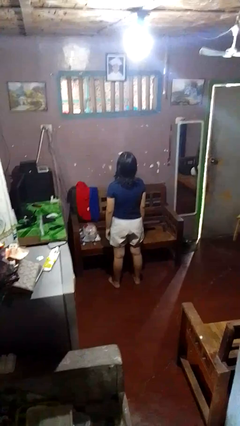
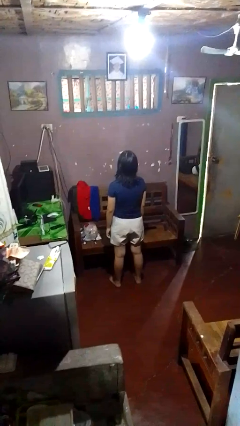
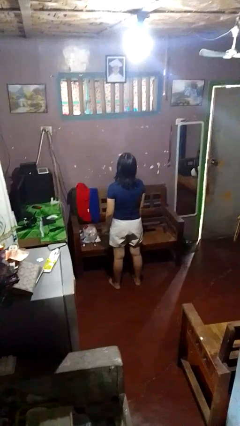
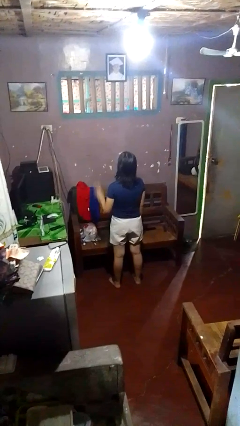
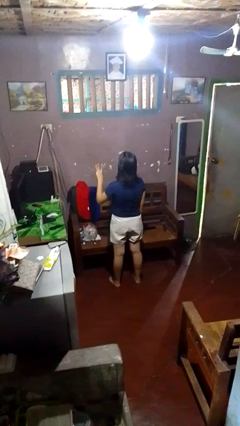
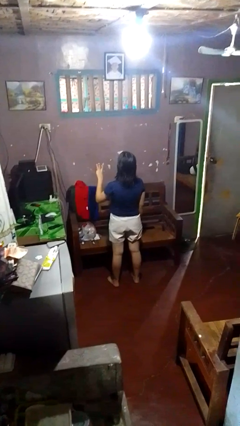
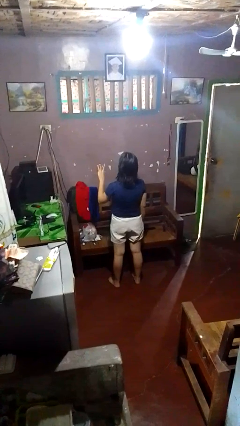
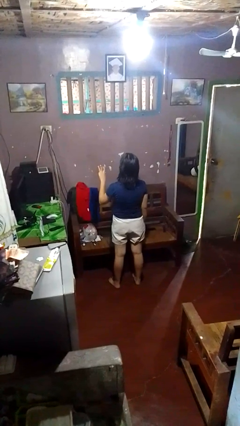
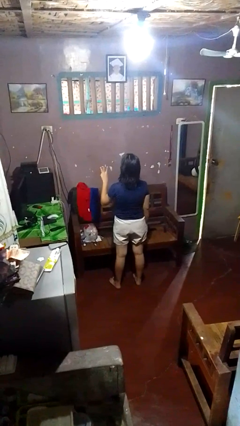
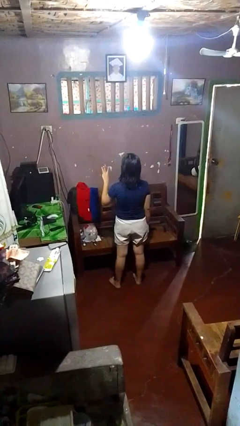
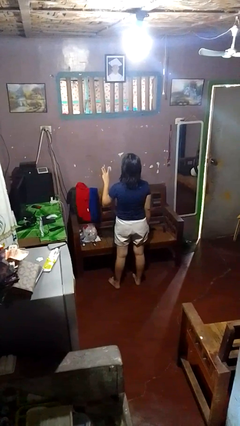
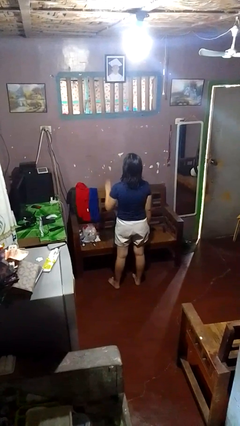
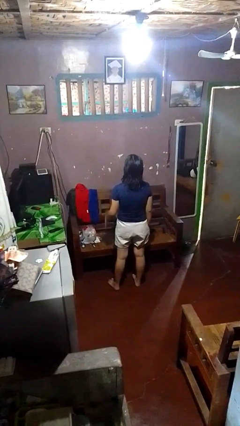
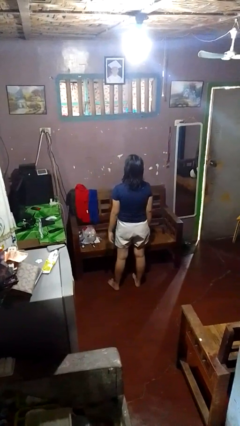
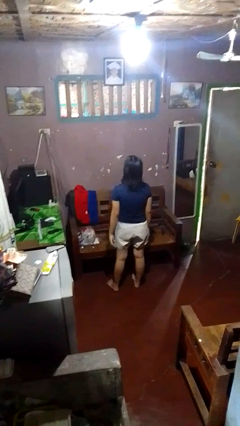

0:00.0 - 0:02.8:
person gestures number three

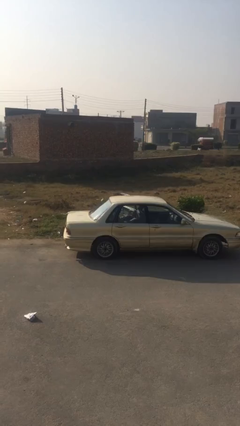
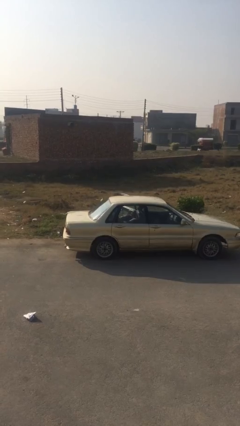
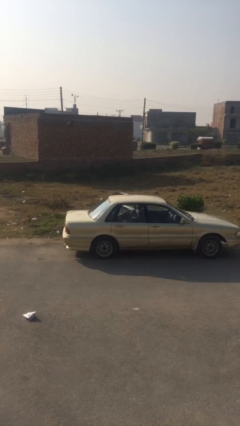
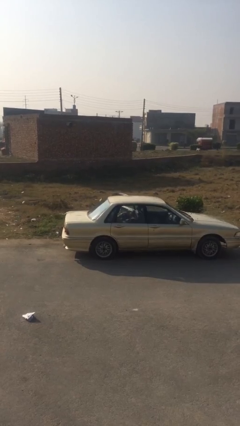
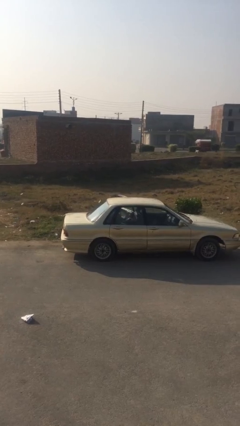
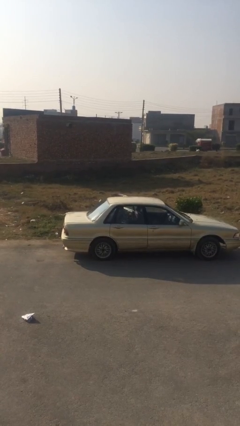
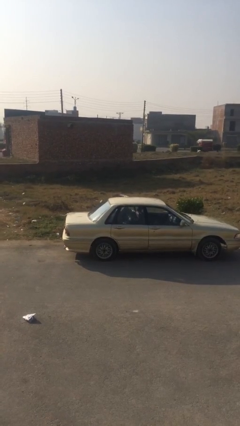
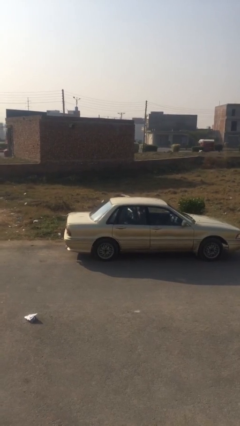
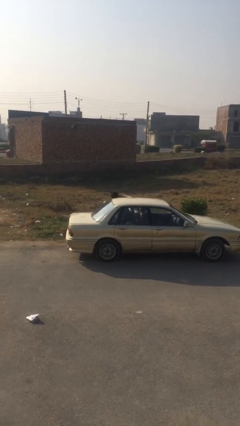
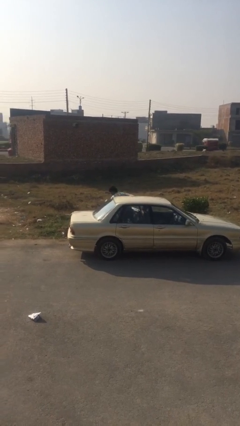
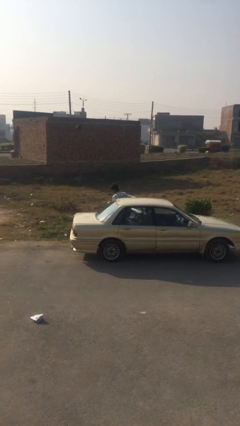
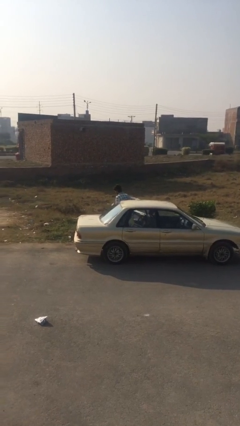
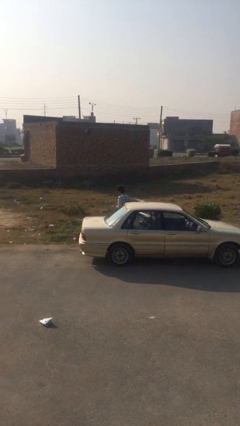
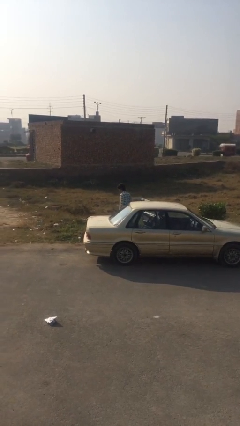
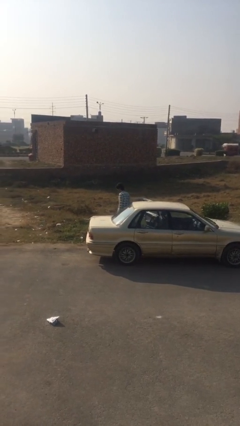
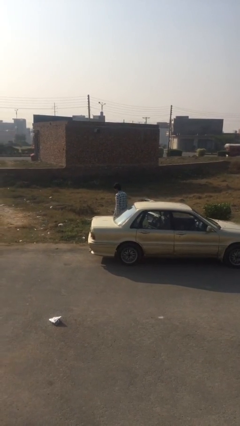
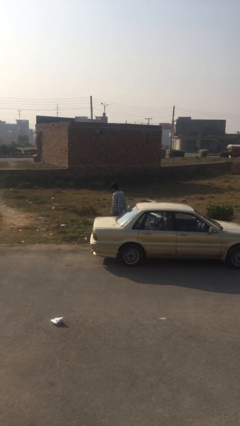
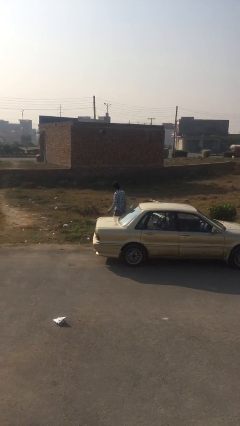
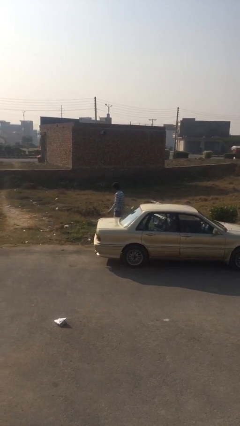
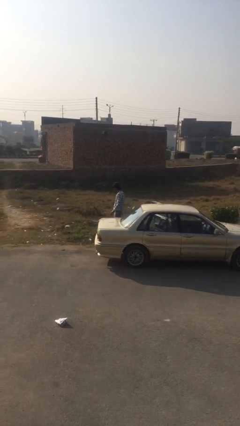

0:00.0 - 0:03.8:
person exits car

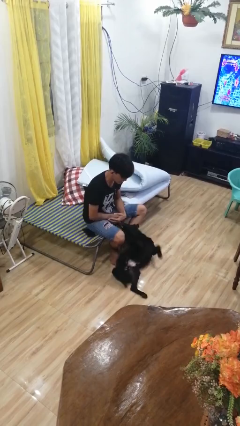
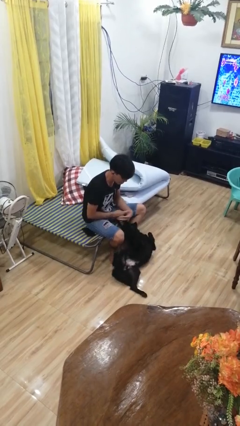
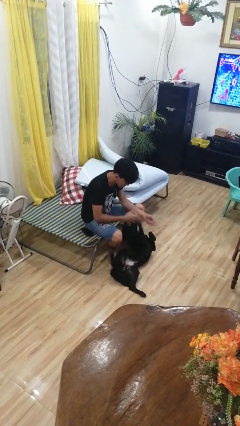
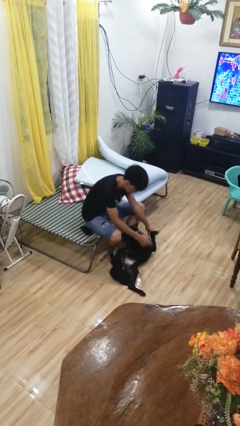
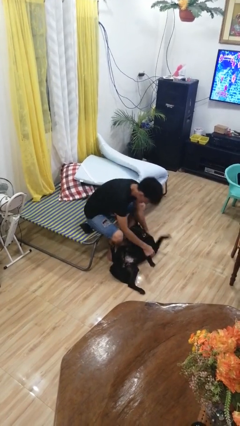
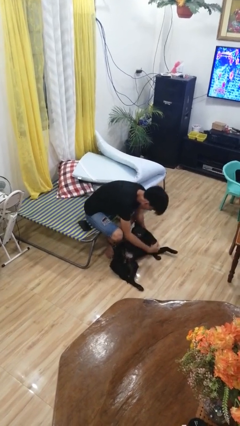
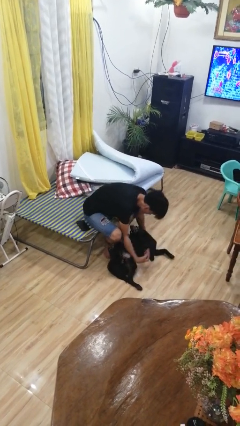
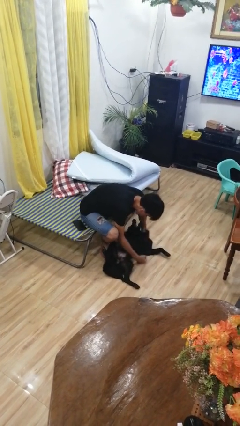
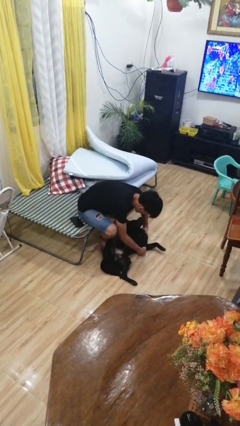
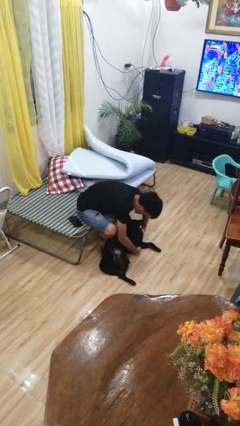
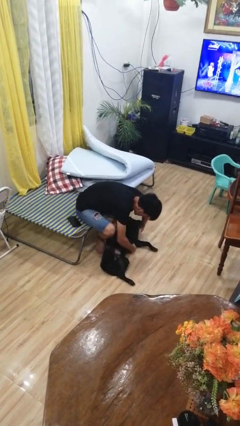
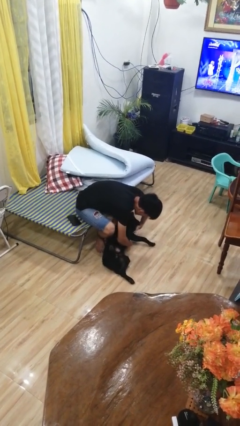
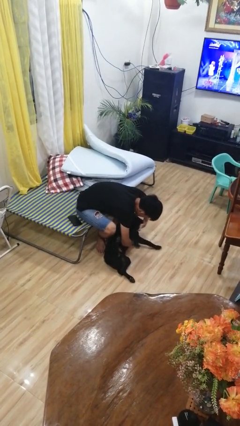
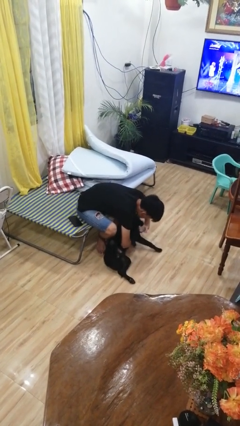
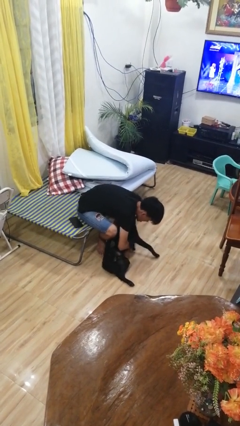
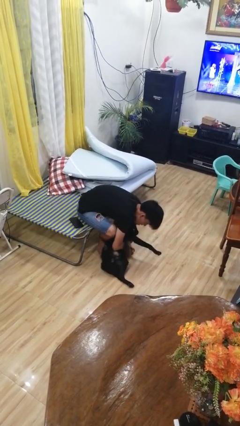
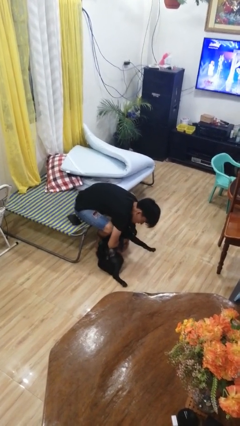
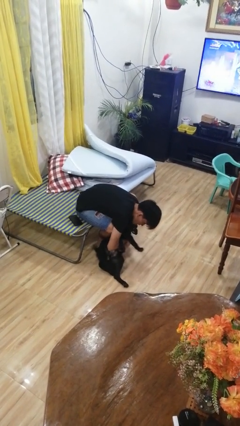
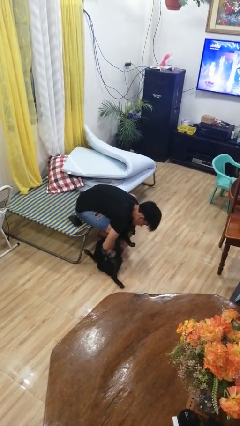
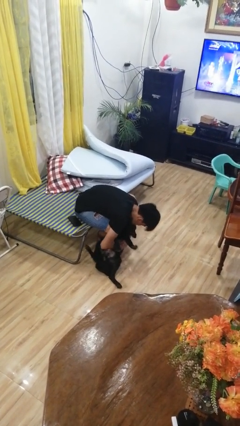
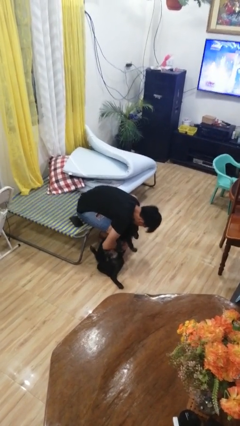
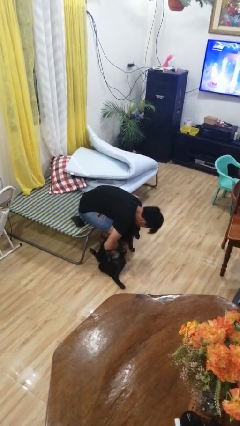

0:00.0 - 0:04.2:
person hugs dog

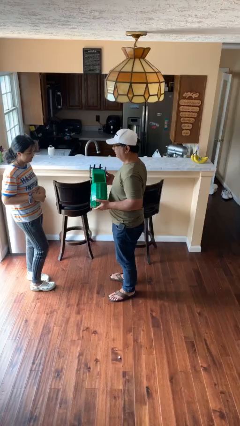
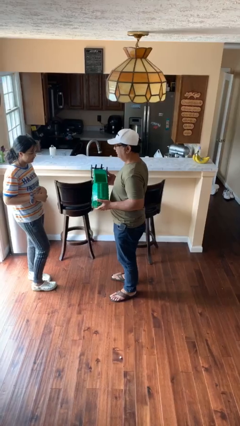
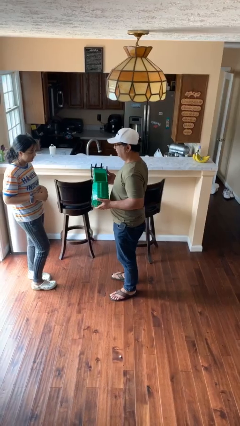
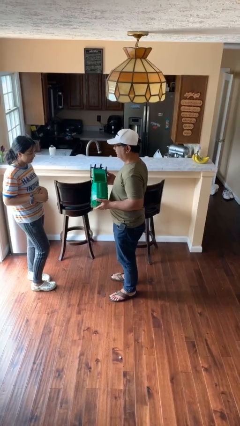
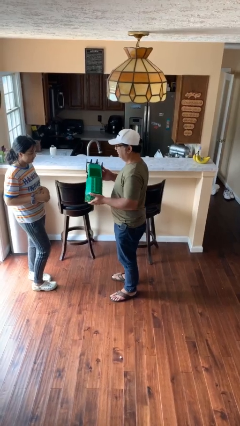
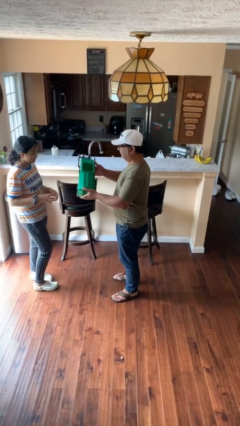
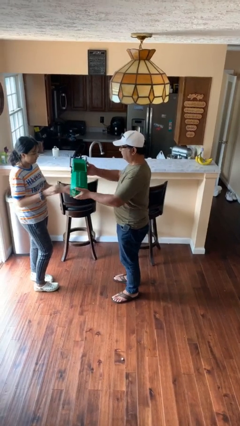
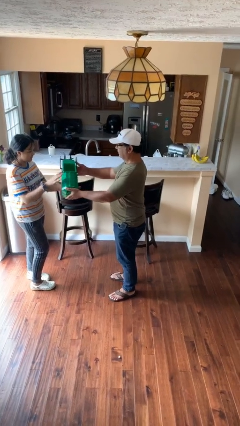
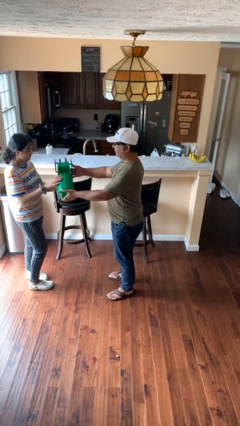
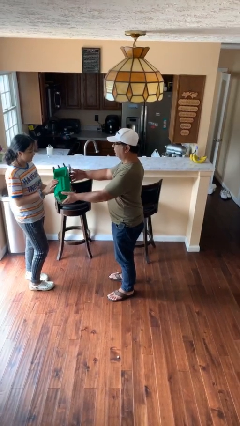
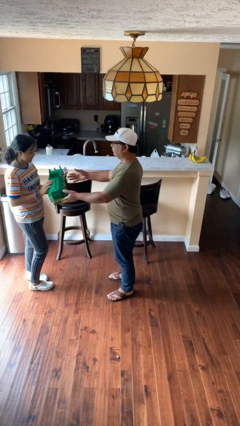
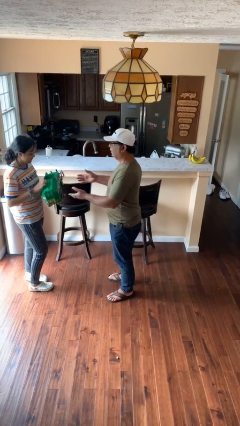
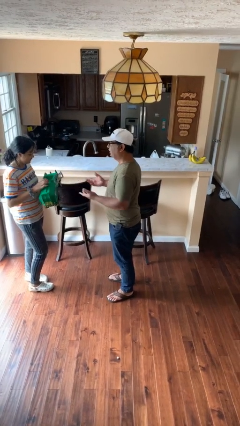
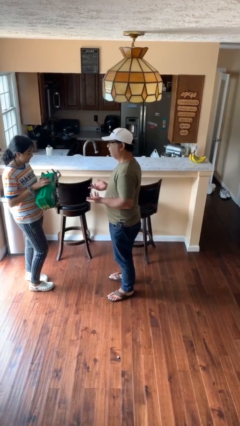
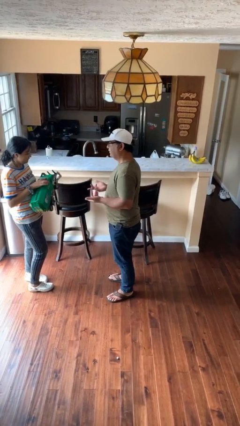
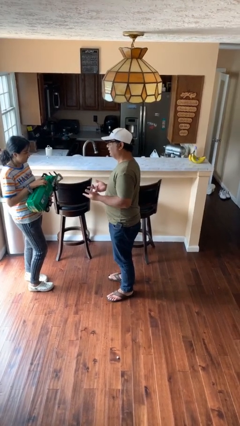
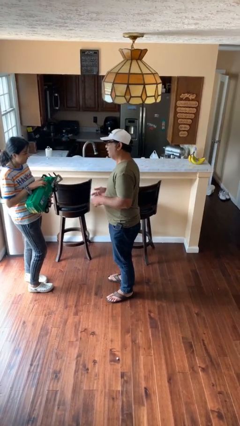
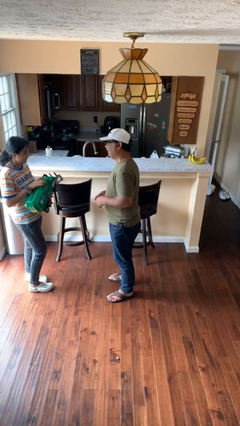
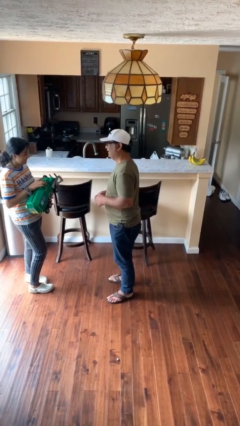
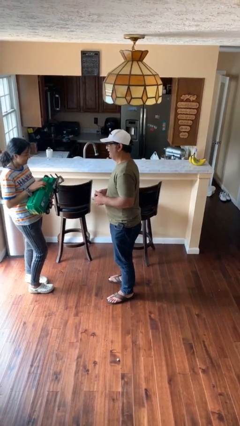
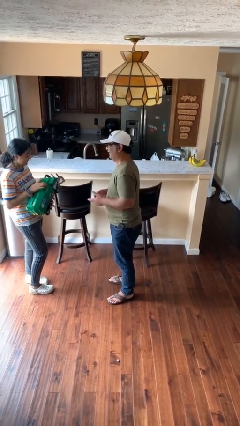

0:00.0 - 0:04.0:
person transfers object to person

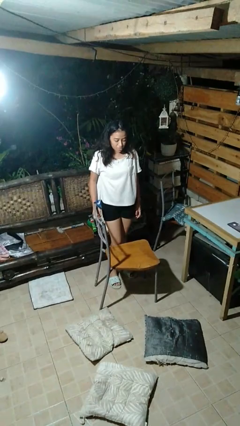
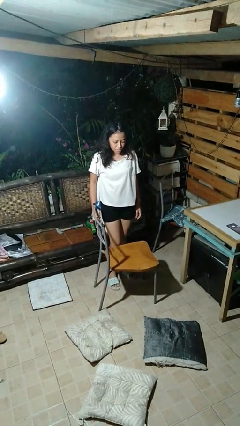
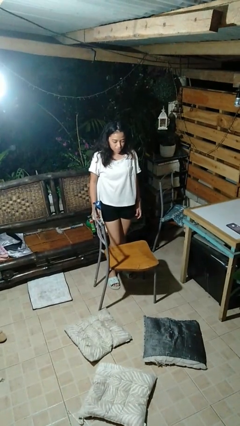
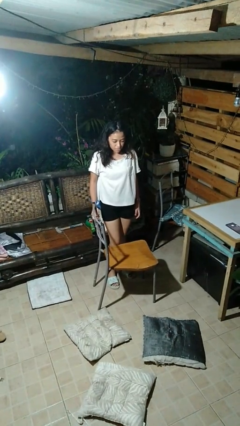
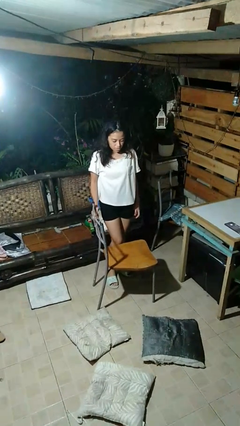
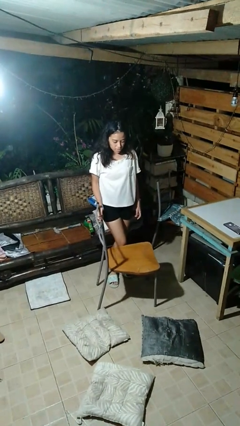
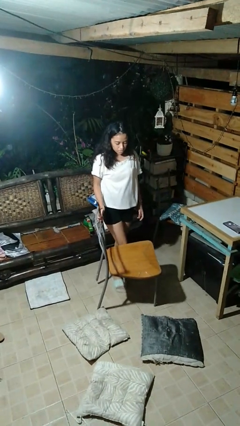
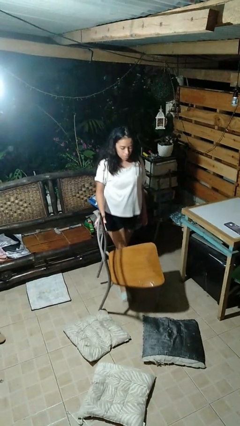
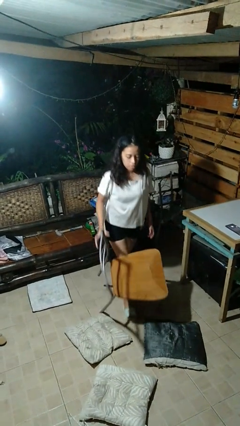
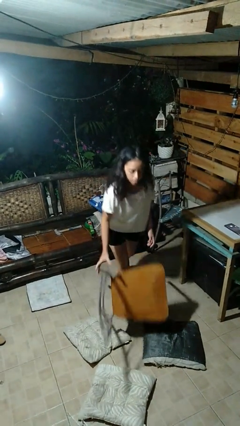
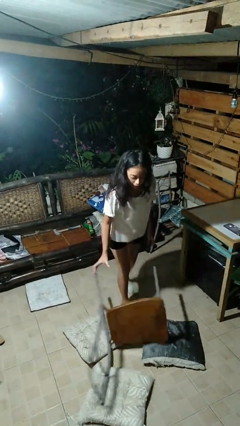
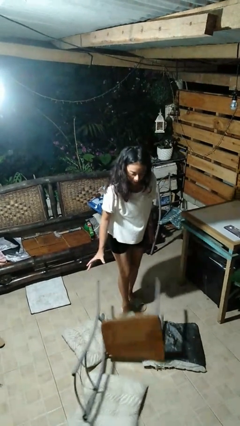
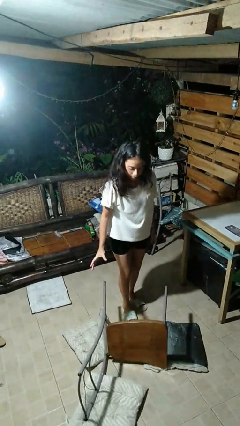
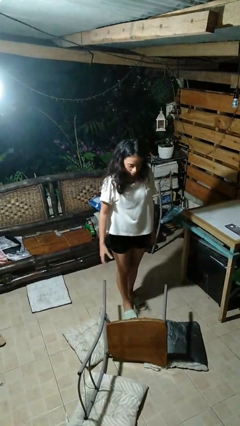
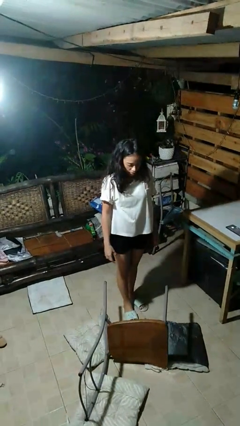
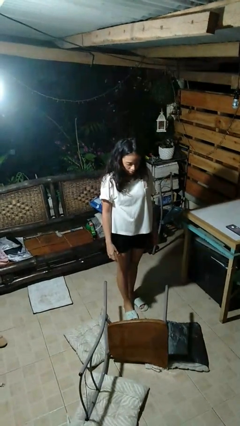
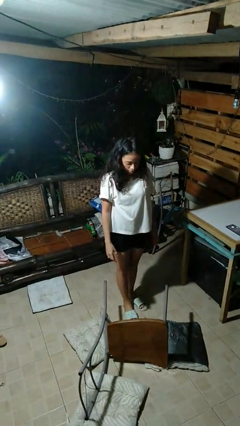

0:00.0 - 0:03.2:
person knocks over furniture
